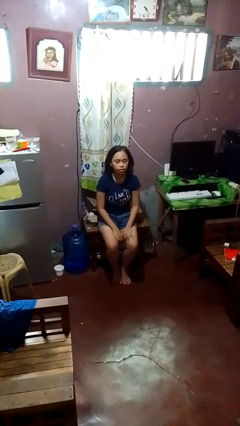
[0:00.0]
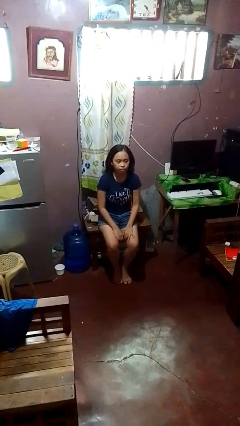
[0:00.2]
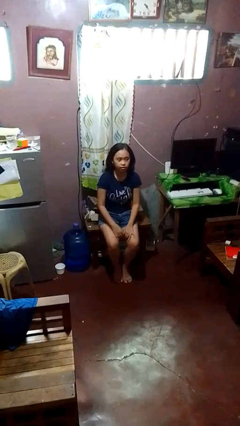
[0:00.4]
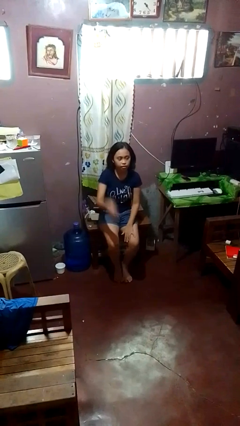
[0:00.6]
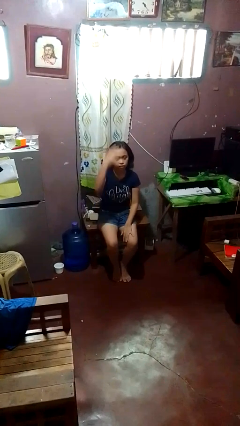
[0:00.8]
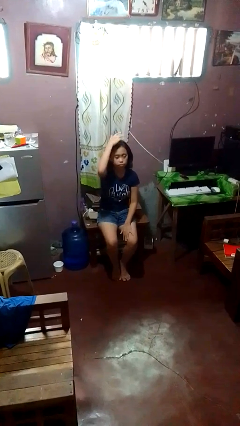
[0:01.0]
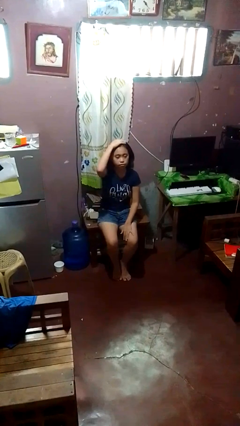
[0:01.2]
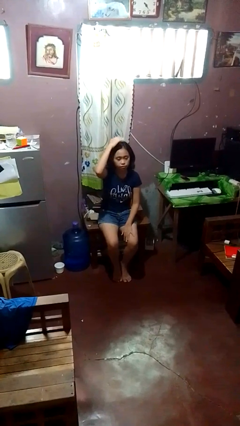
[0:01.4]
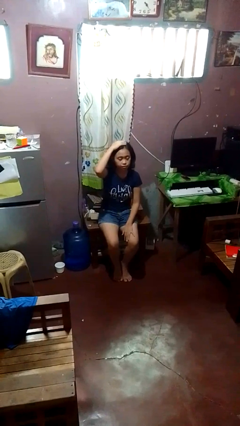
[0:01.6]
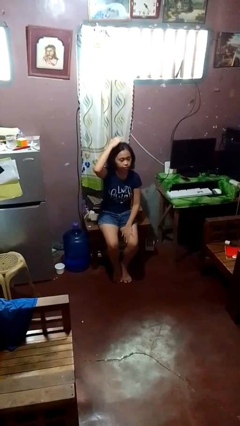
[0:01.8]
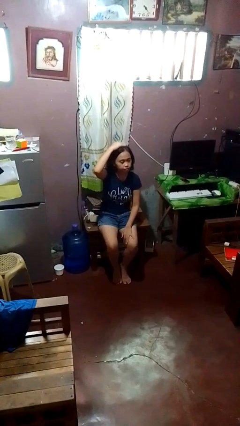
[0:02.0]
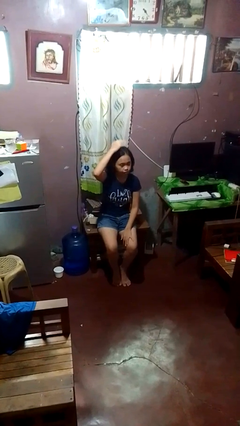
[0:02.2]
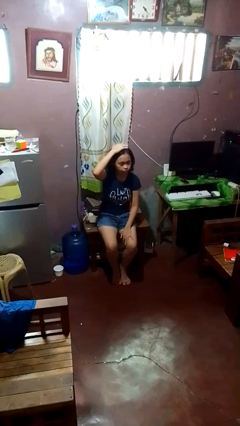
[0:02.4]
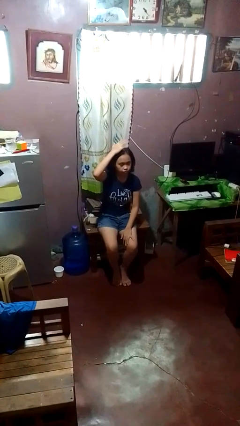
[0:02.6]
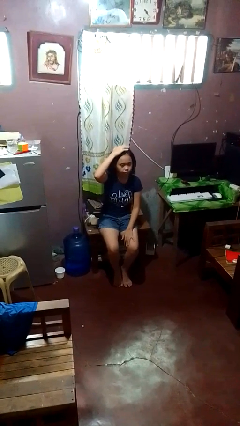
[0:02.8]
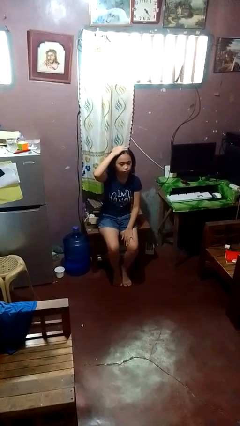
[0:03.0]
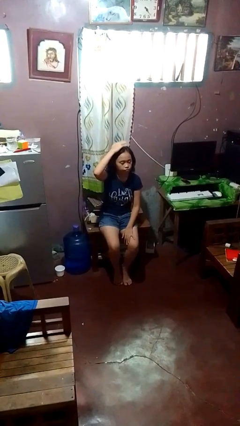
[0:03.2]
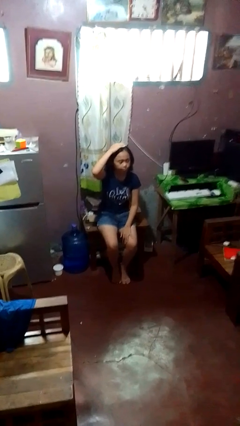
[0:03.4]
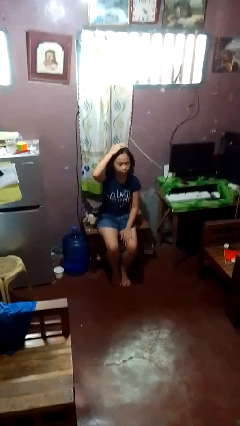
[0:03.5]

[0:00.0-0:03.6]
person pats head

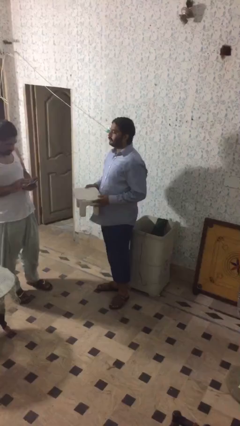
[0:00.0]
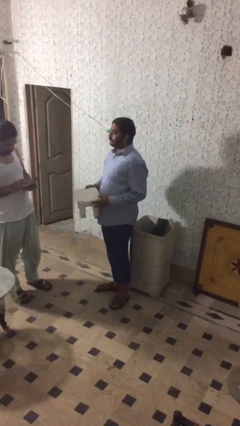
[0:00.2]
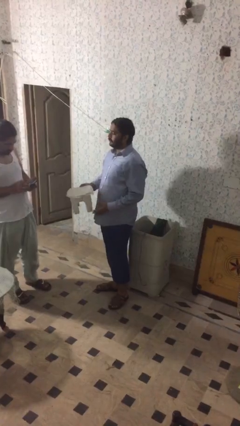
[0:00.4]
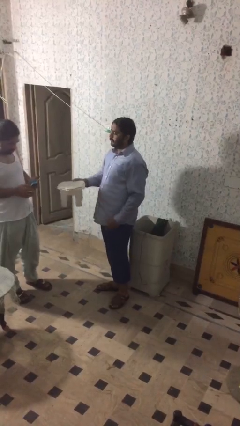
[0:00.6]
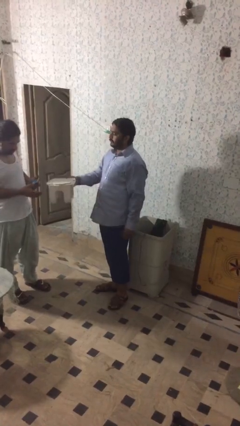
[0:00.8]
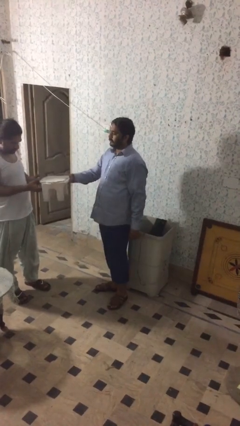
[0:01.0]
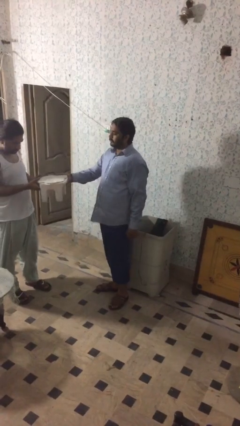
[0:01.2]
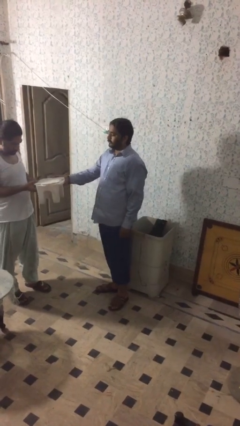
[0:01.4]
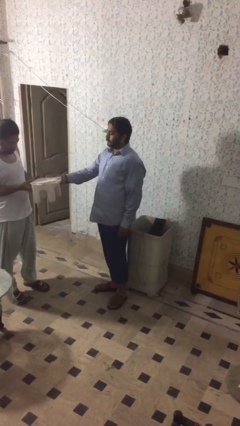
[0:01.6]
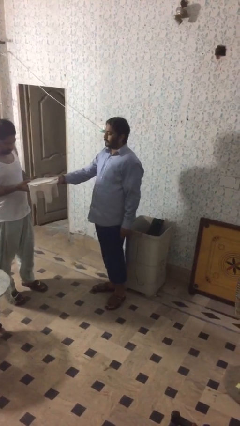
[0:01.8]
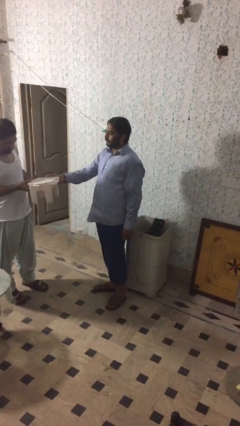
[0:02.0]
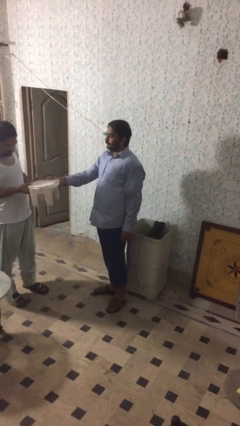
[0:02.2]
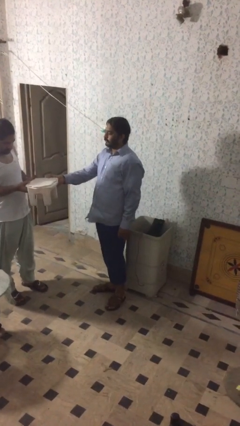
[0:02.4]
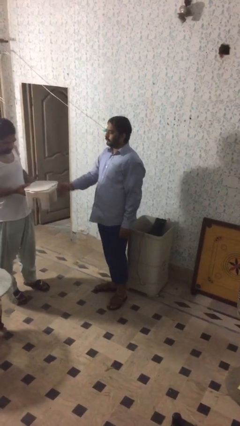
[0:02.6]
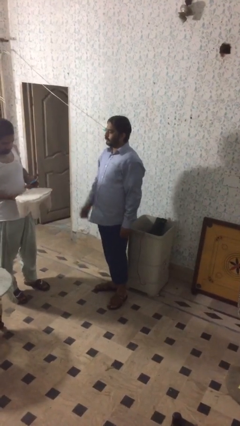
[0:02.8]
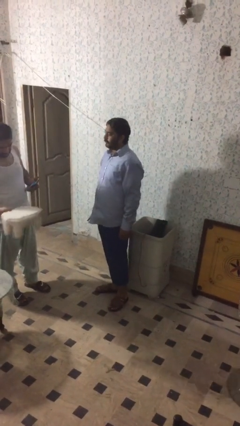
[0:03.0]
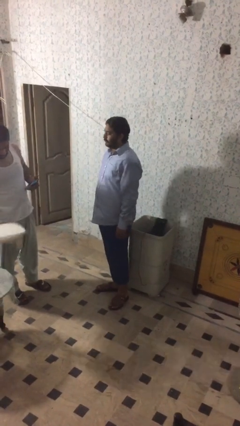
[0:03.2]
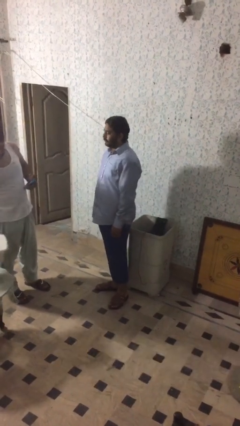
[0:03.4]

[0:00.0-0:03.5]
person transfers object to person

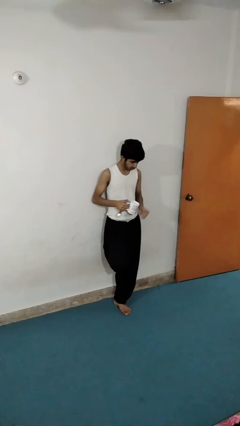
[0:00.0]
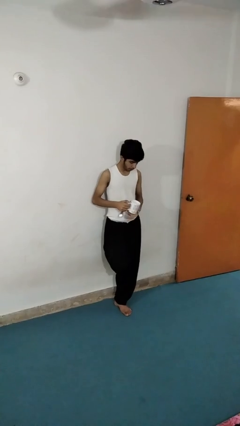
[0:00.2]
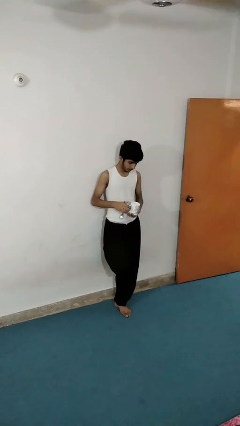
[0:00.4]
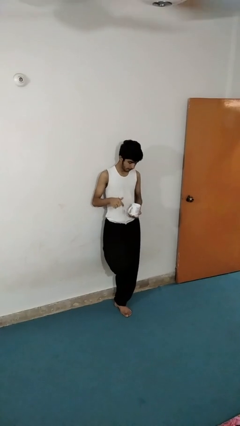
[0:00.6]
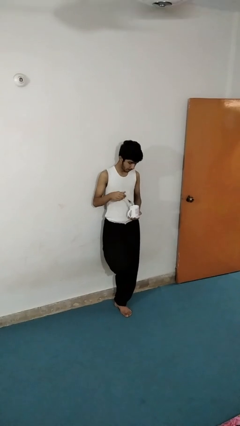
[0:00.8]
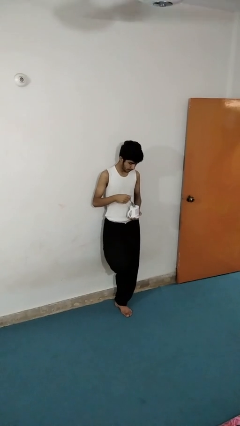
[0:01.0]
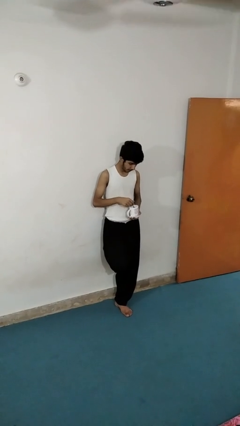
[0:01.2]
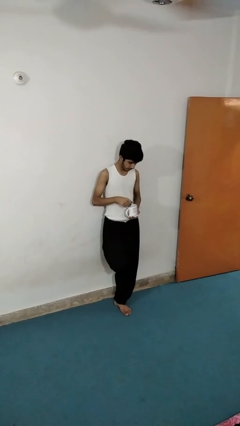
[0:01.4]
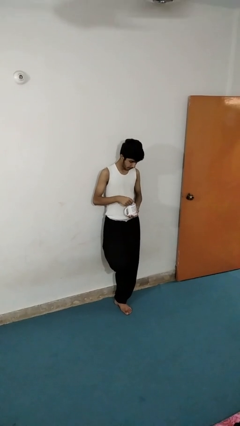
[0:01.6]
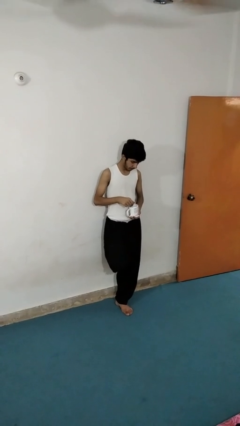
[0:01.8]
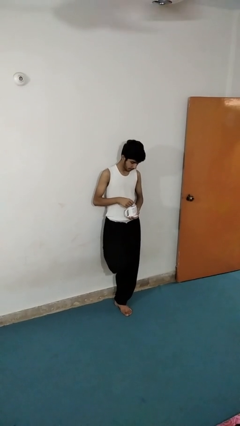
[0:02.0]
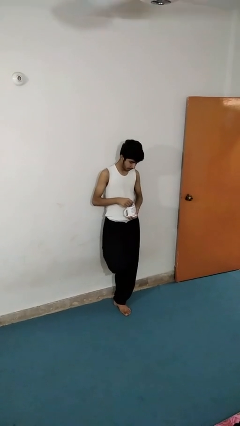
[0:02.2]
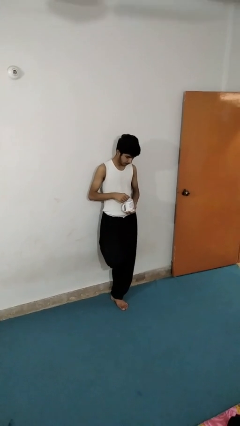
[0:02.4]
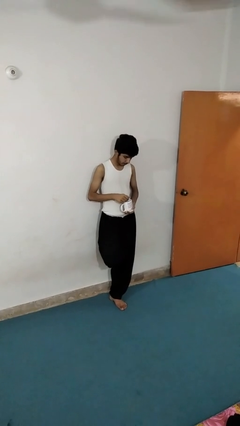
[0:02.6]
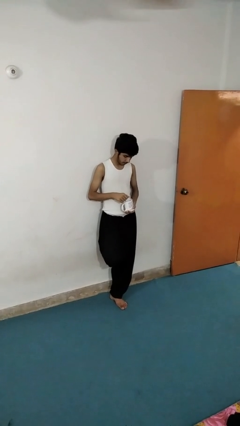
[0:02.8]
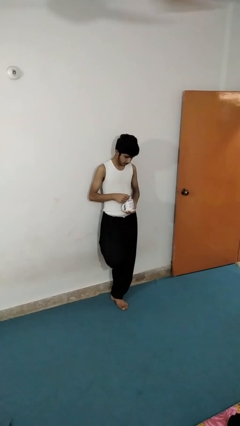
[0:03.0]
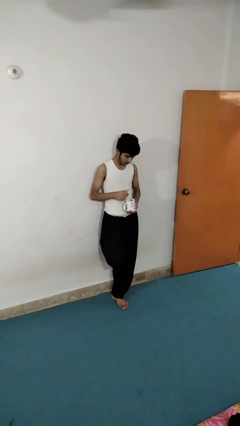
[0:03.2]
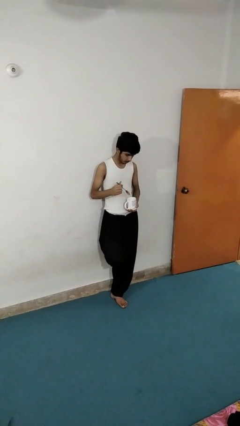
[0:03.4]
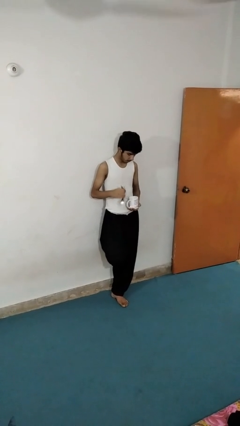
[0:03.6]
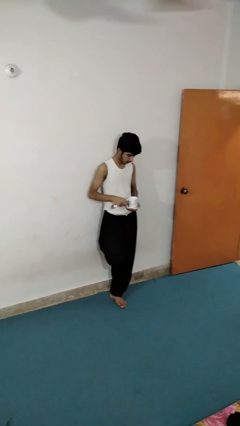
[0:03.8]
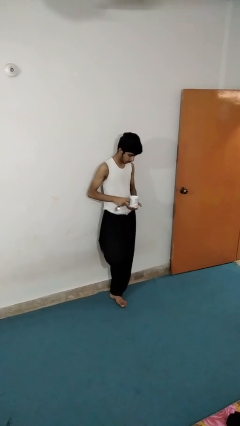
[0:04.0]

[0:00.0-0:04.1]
person stirs mug

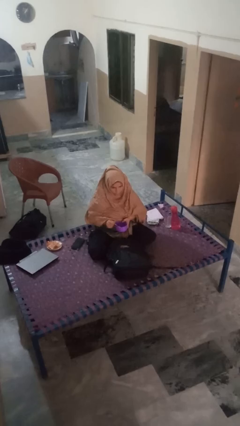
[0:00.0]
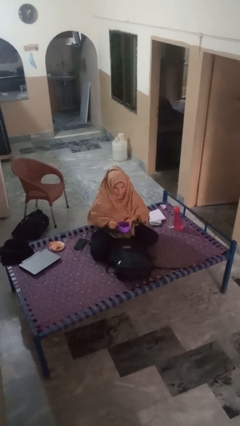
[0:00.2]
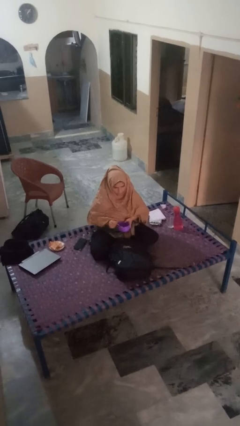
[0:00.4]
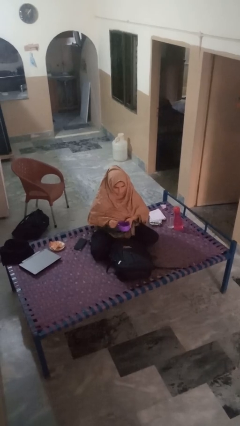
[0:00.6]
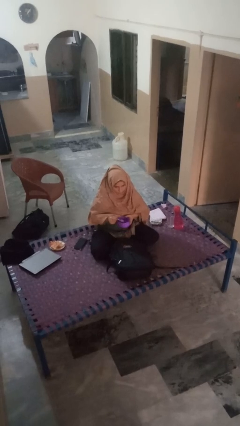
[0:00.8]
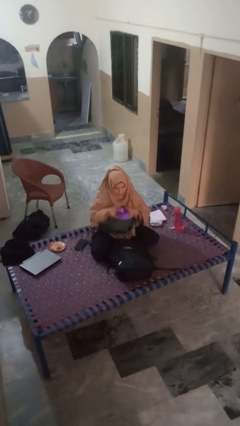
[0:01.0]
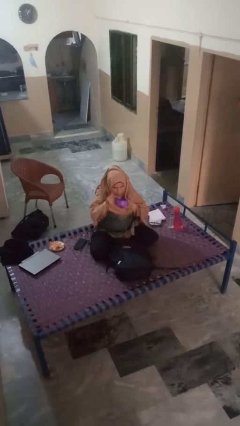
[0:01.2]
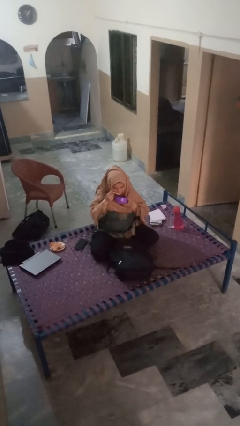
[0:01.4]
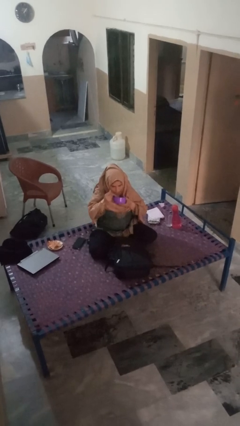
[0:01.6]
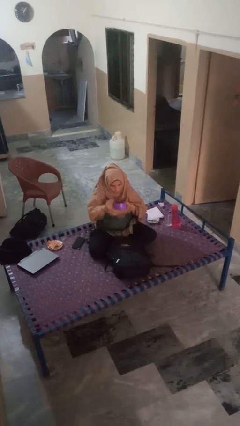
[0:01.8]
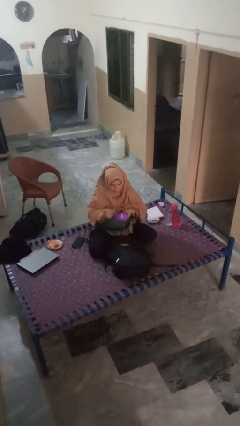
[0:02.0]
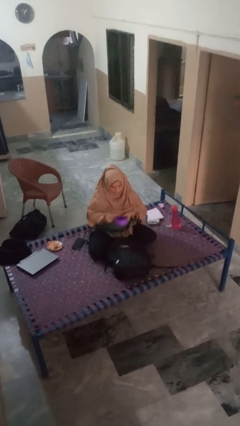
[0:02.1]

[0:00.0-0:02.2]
person eats snack from bag

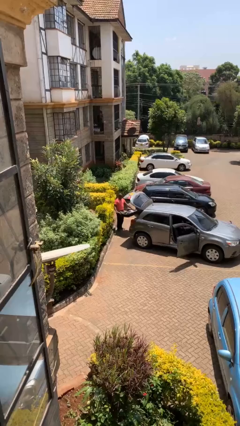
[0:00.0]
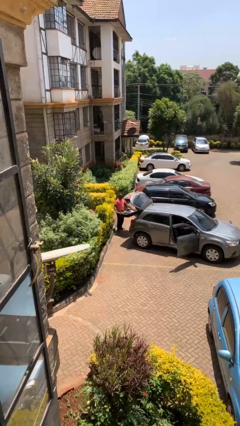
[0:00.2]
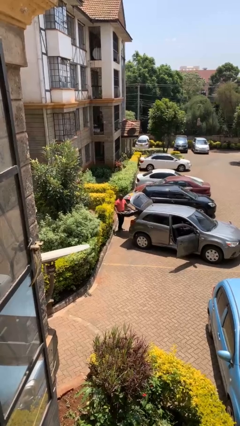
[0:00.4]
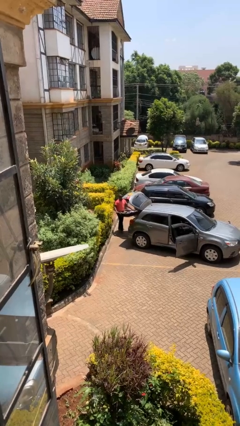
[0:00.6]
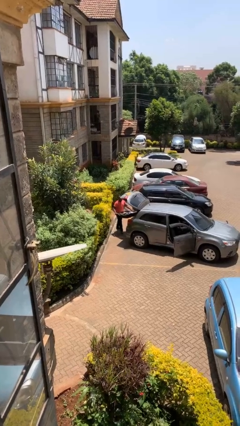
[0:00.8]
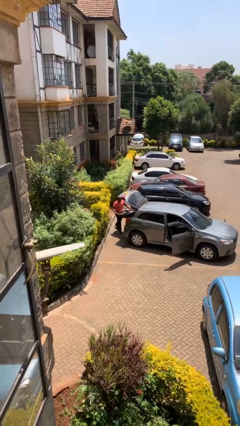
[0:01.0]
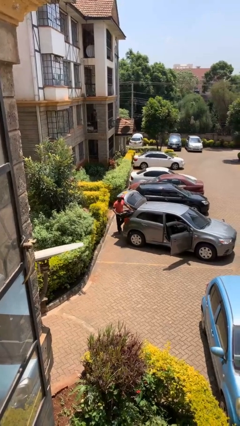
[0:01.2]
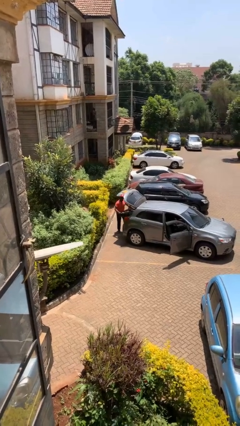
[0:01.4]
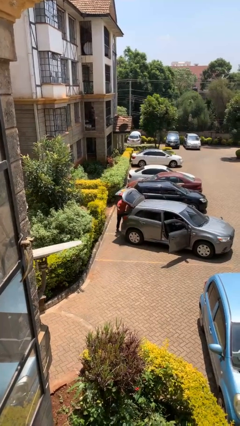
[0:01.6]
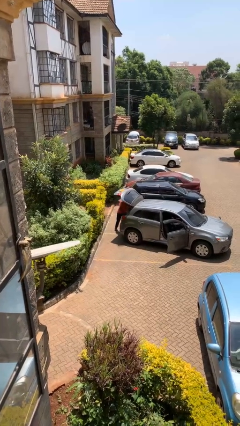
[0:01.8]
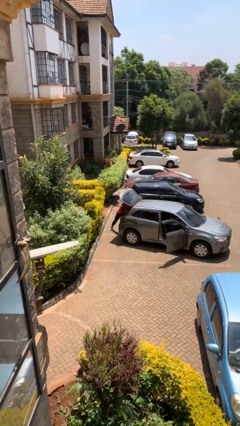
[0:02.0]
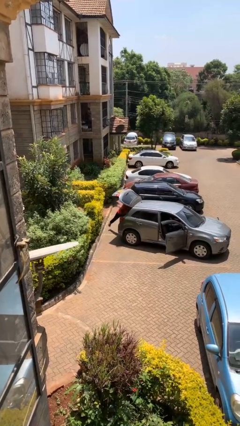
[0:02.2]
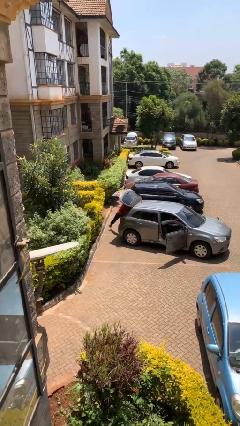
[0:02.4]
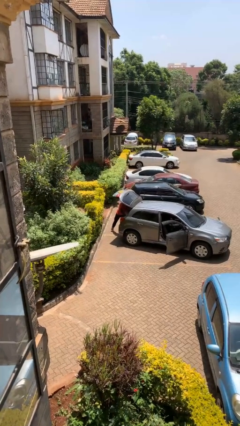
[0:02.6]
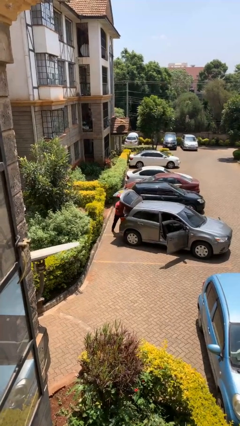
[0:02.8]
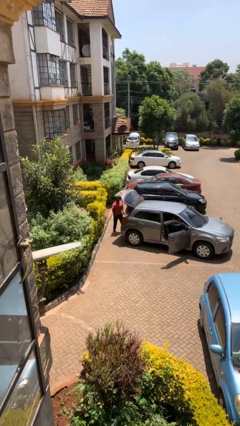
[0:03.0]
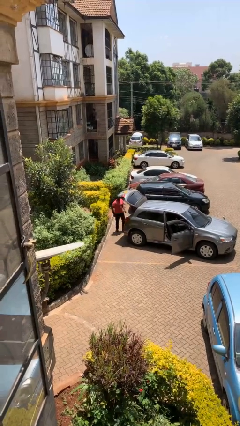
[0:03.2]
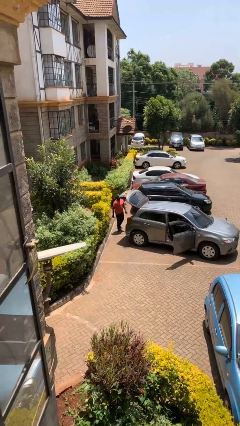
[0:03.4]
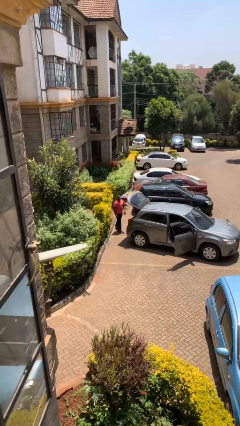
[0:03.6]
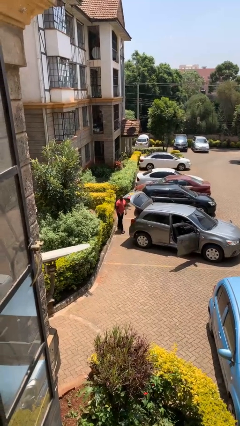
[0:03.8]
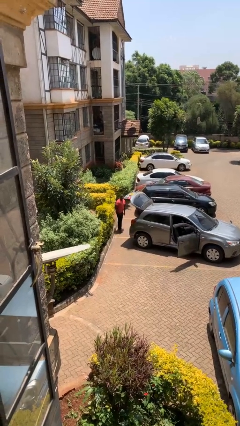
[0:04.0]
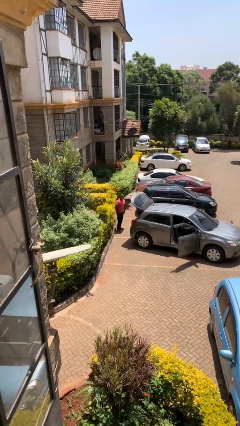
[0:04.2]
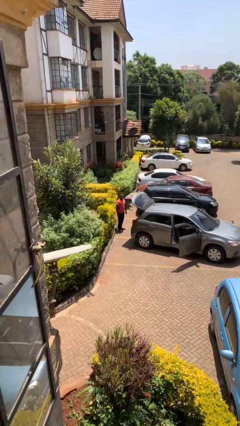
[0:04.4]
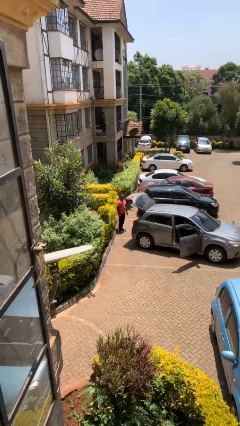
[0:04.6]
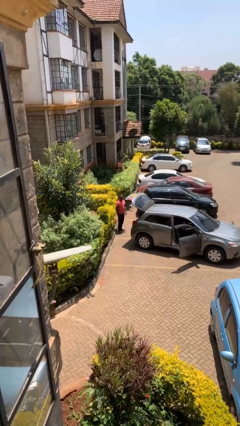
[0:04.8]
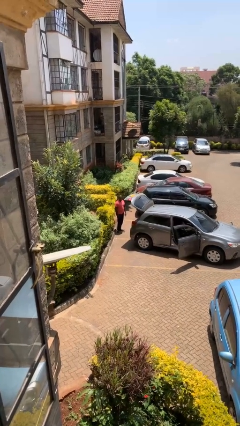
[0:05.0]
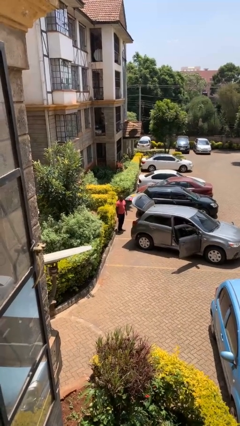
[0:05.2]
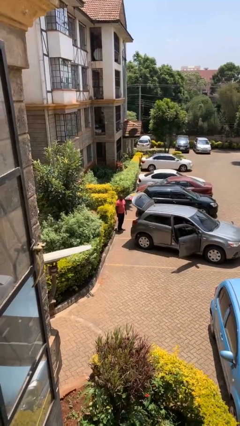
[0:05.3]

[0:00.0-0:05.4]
person loads car
